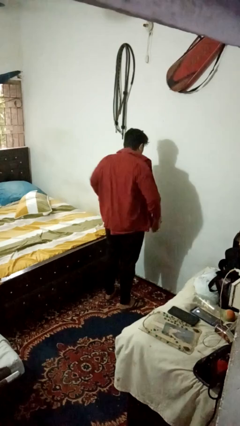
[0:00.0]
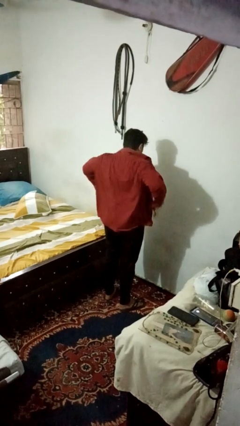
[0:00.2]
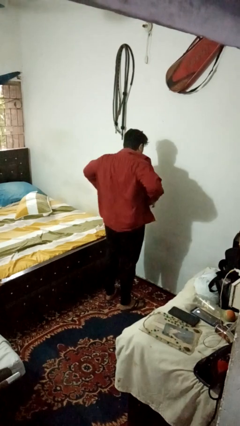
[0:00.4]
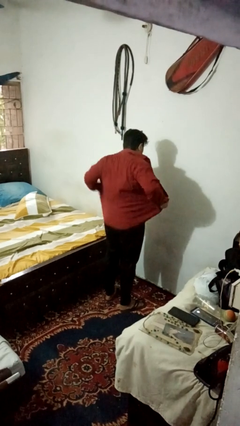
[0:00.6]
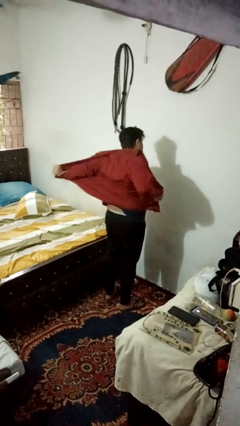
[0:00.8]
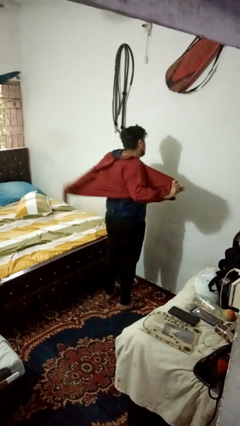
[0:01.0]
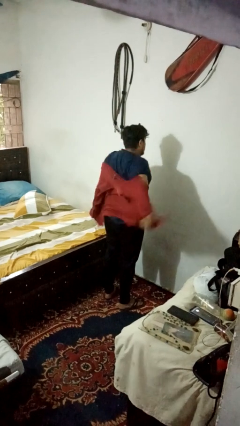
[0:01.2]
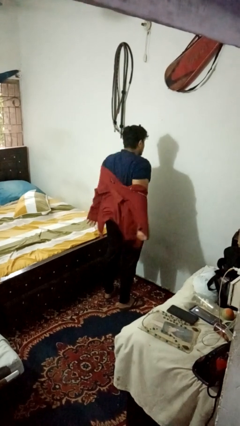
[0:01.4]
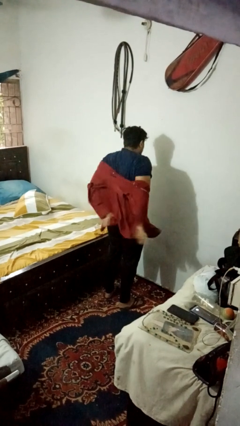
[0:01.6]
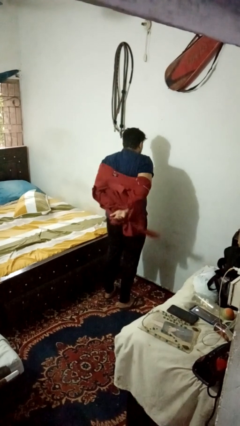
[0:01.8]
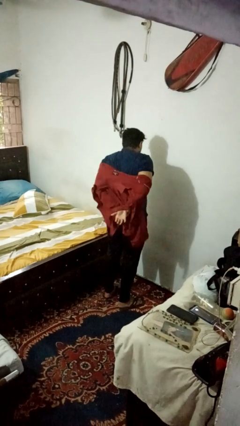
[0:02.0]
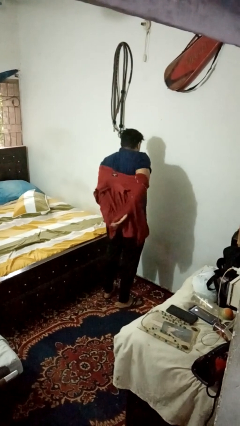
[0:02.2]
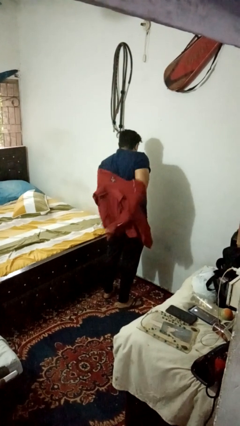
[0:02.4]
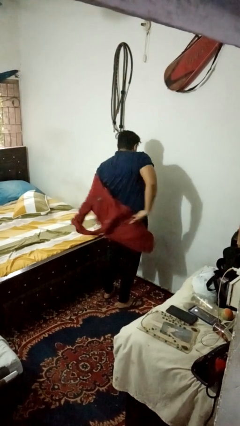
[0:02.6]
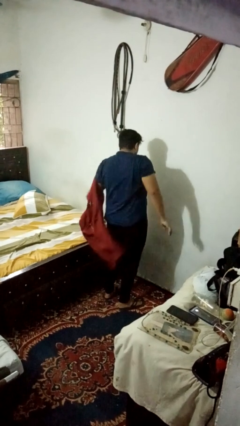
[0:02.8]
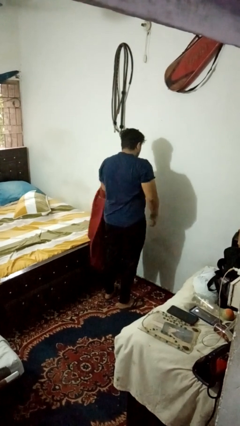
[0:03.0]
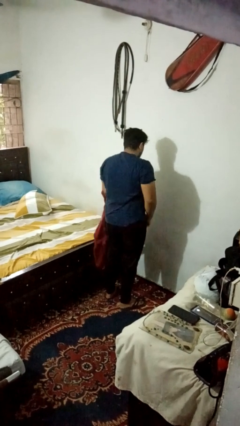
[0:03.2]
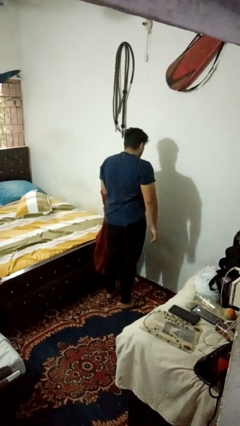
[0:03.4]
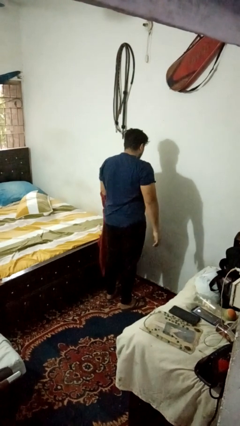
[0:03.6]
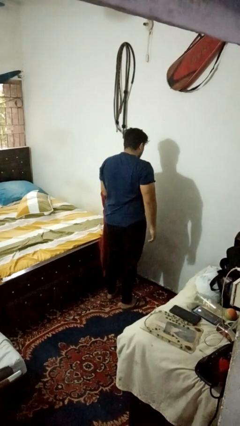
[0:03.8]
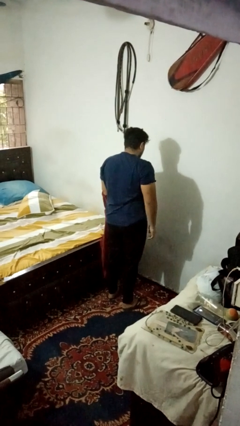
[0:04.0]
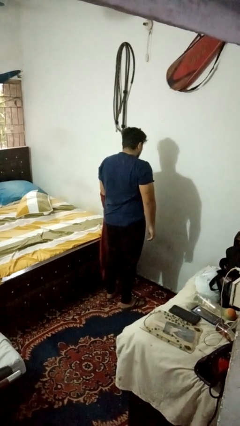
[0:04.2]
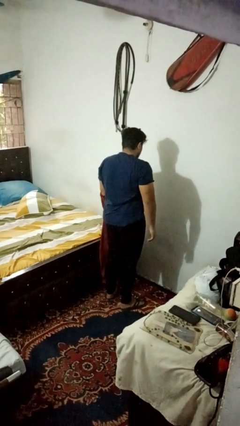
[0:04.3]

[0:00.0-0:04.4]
person takes off shirt

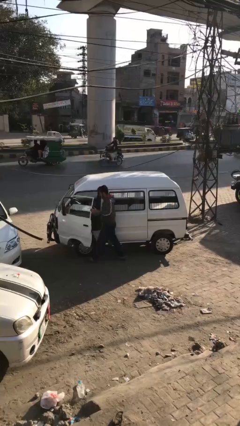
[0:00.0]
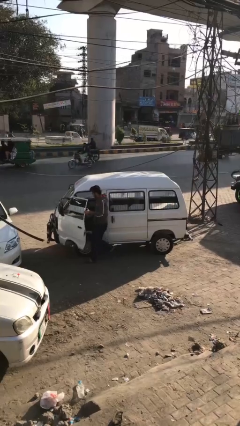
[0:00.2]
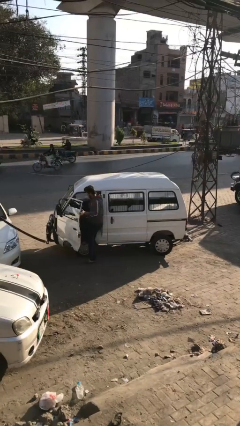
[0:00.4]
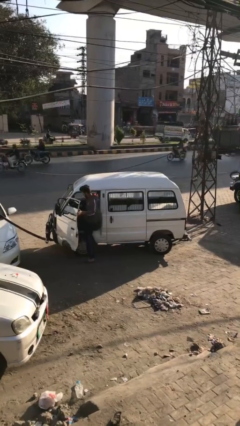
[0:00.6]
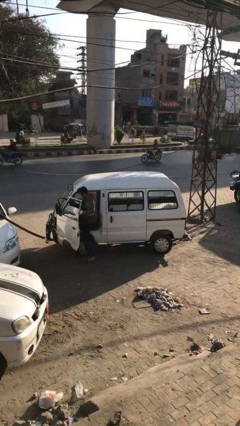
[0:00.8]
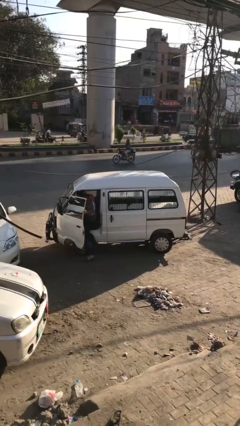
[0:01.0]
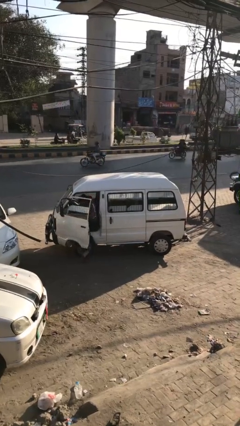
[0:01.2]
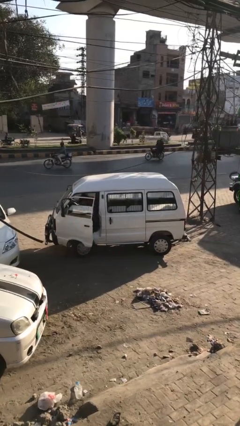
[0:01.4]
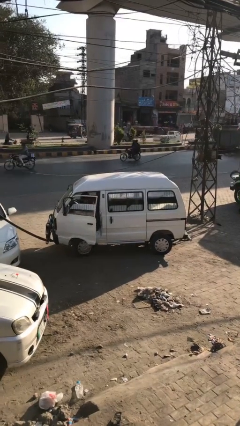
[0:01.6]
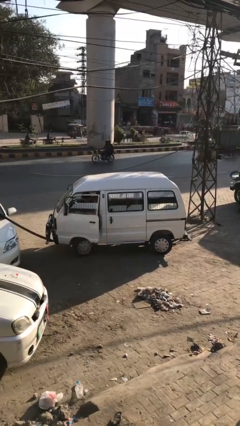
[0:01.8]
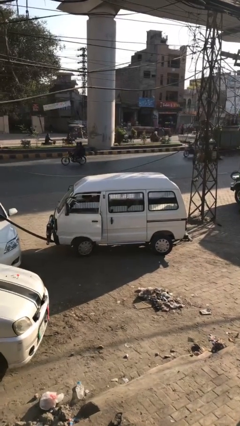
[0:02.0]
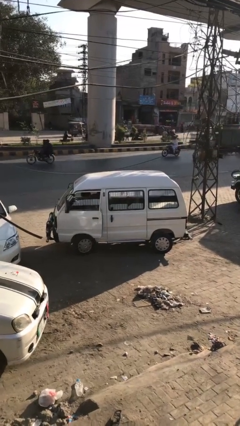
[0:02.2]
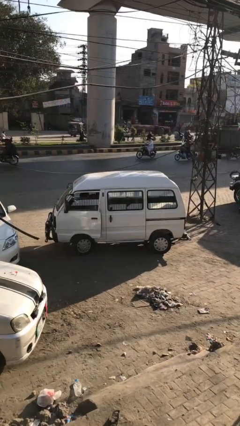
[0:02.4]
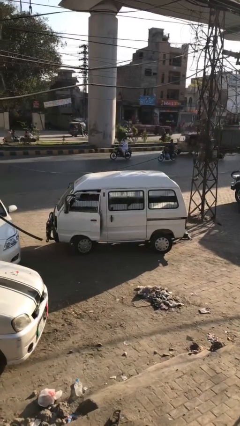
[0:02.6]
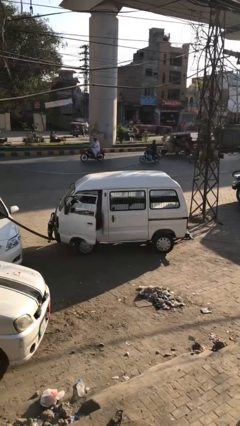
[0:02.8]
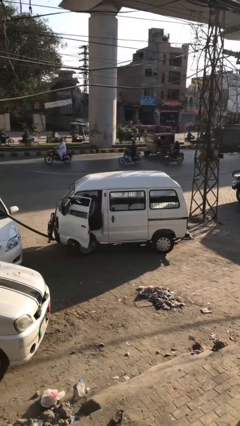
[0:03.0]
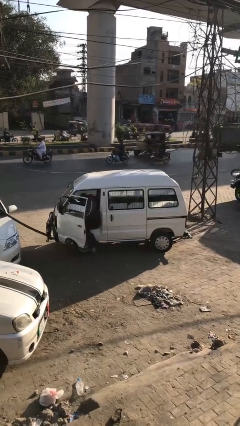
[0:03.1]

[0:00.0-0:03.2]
car picks up person

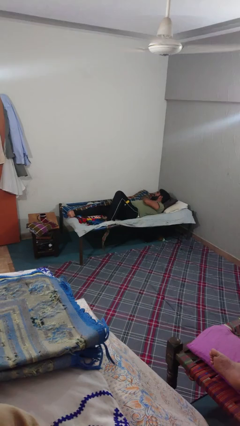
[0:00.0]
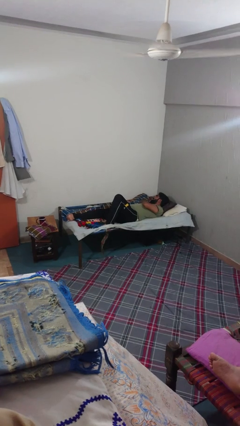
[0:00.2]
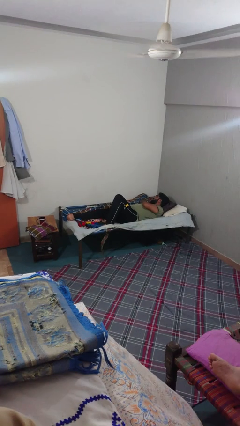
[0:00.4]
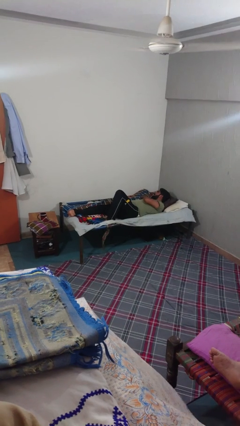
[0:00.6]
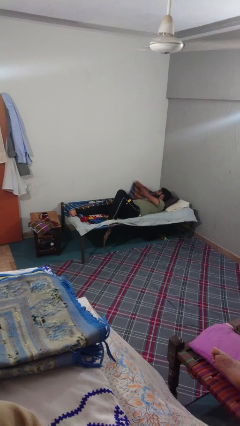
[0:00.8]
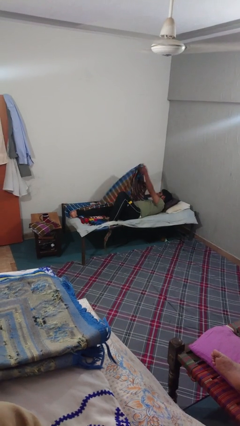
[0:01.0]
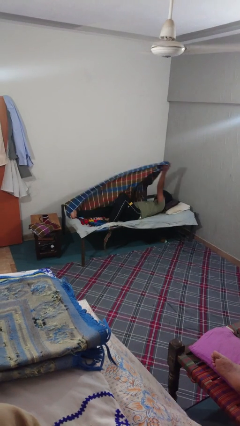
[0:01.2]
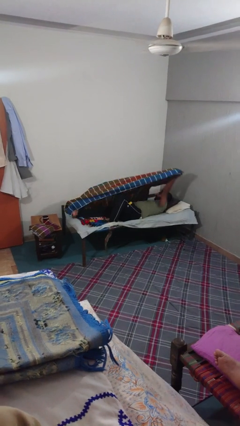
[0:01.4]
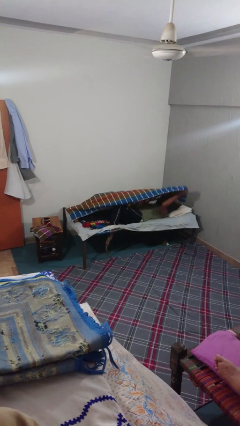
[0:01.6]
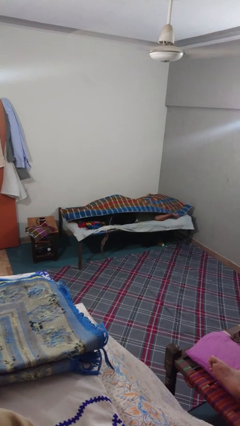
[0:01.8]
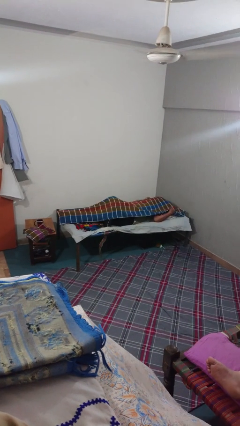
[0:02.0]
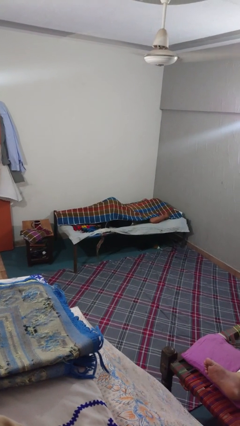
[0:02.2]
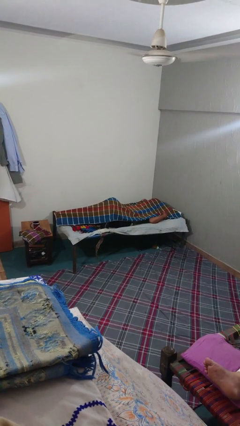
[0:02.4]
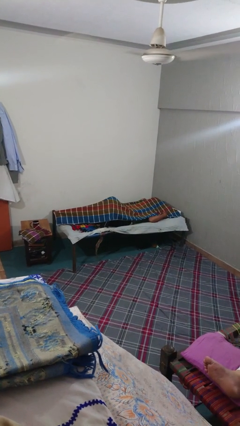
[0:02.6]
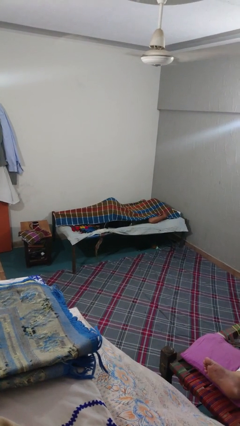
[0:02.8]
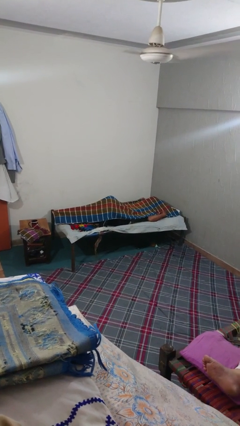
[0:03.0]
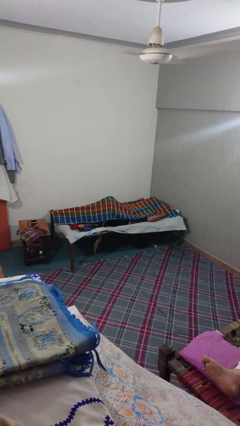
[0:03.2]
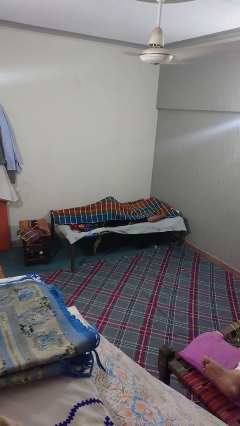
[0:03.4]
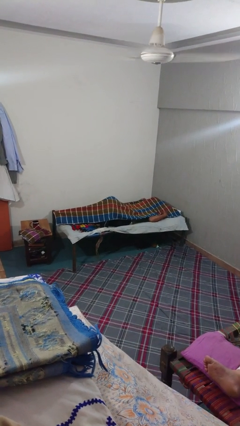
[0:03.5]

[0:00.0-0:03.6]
person covers with bedsheets

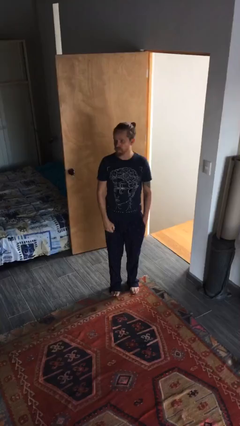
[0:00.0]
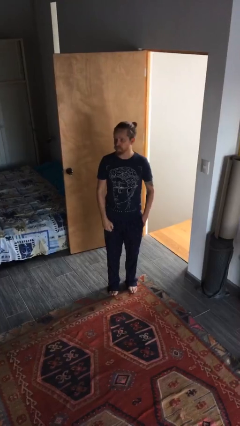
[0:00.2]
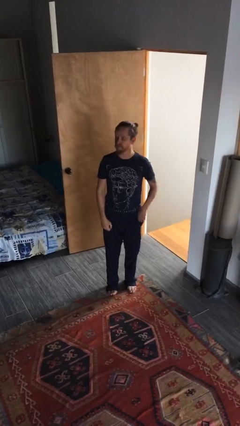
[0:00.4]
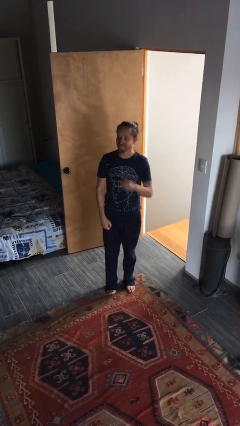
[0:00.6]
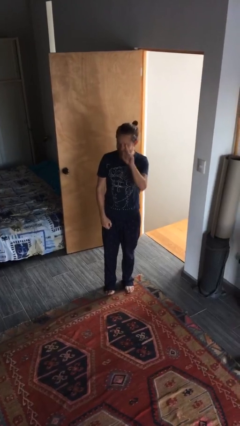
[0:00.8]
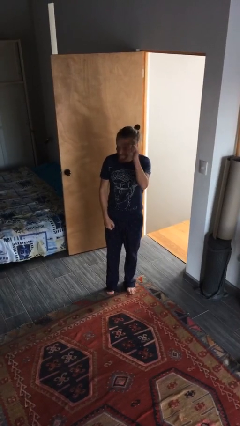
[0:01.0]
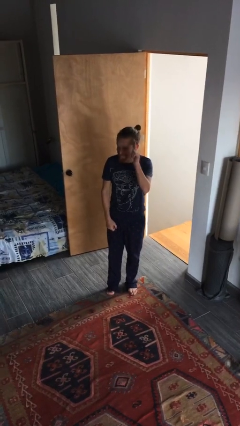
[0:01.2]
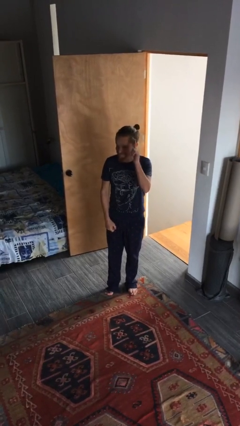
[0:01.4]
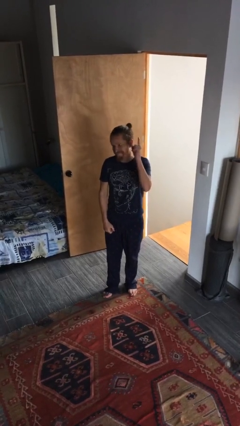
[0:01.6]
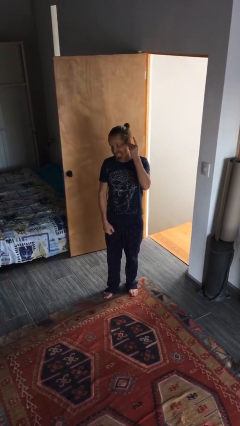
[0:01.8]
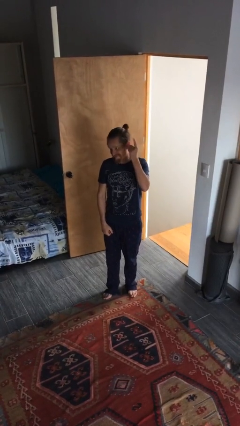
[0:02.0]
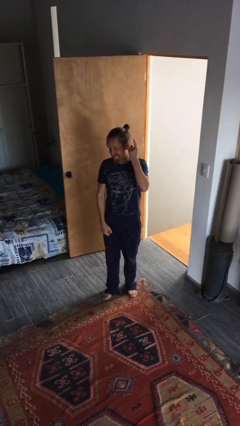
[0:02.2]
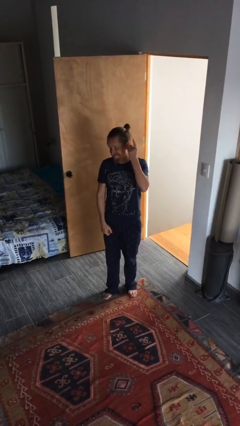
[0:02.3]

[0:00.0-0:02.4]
person gestures raise hand

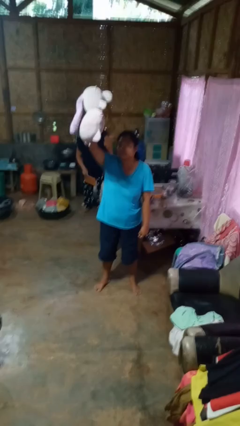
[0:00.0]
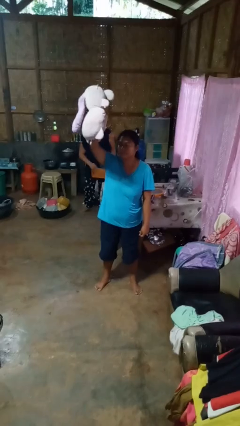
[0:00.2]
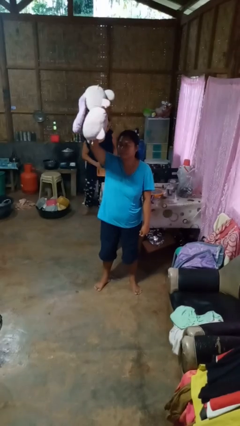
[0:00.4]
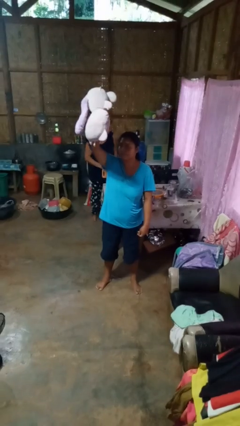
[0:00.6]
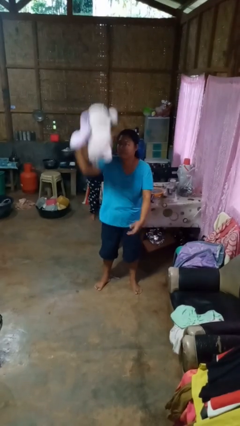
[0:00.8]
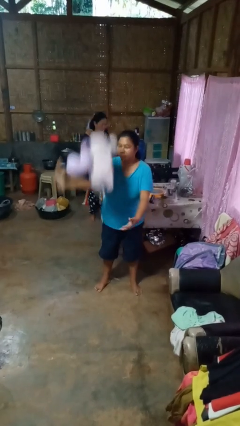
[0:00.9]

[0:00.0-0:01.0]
person drops object

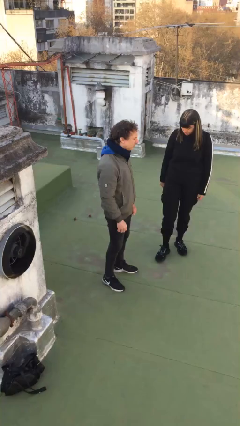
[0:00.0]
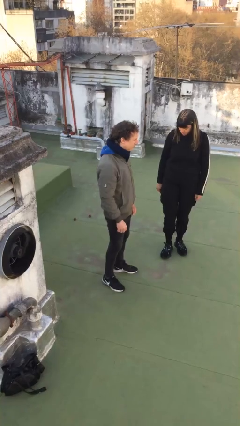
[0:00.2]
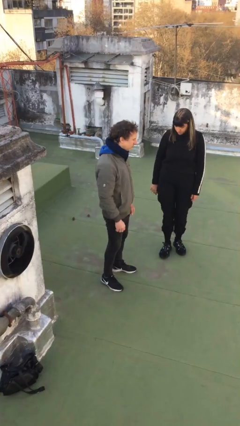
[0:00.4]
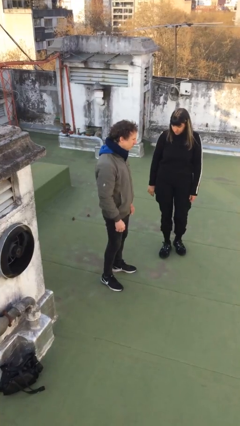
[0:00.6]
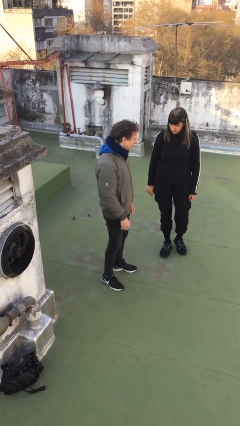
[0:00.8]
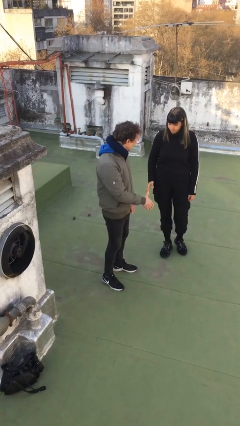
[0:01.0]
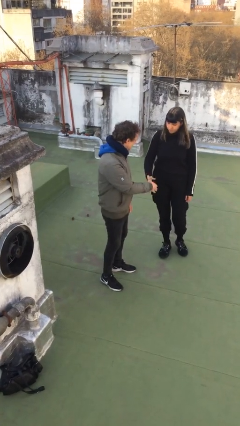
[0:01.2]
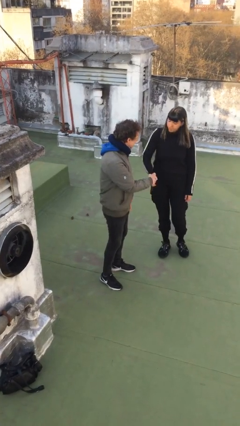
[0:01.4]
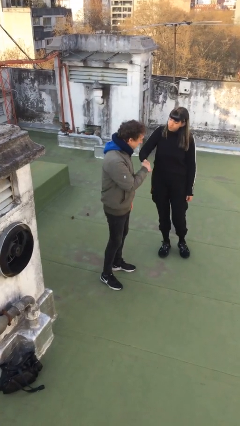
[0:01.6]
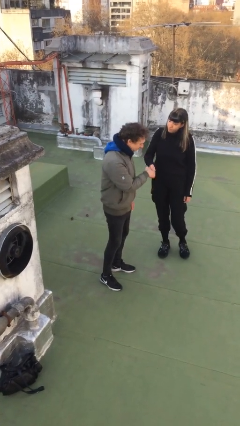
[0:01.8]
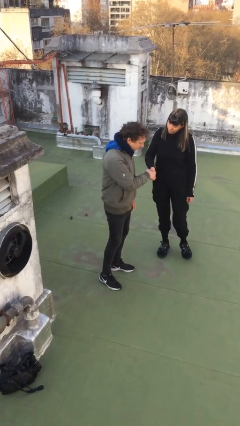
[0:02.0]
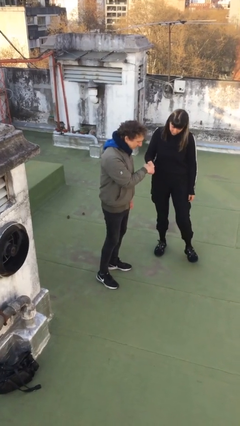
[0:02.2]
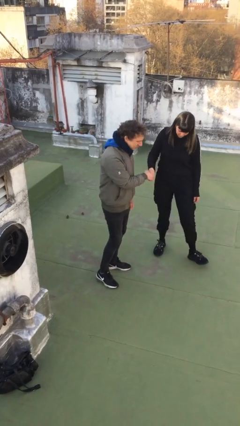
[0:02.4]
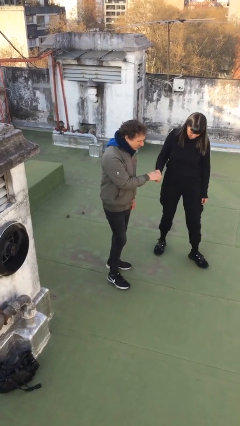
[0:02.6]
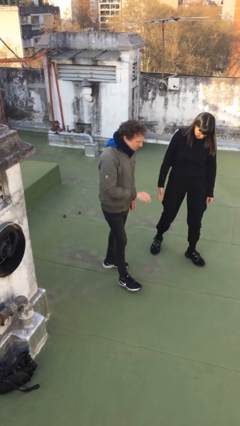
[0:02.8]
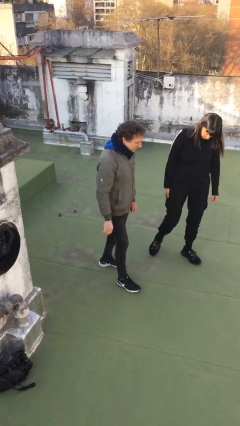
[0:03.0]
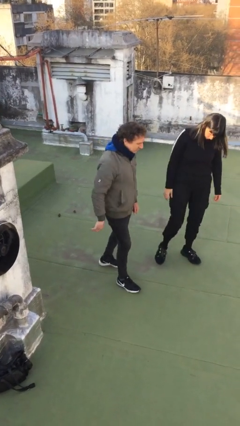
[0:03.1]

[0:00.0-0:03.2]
person shakes hand
